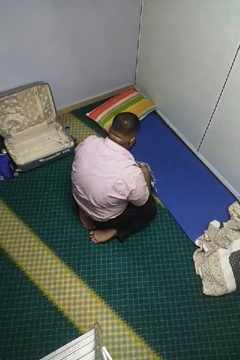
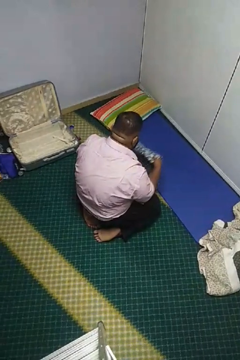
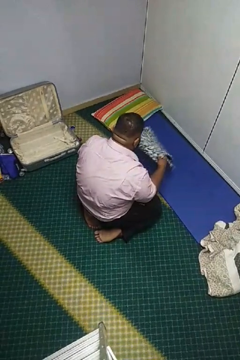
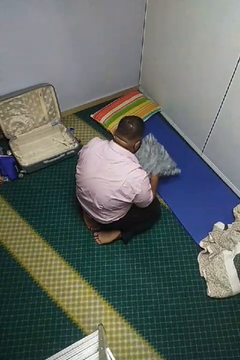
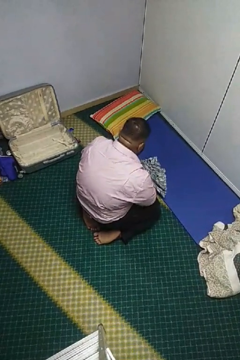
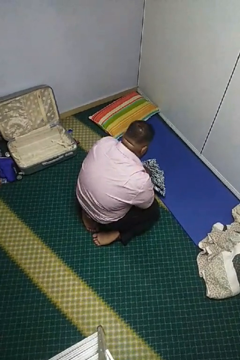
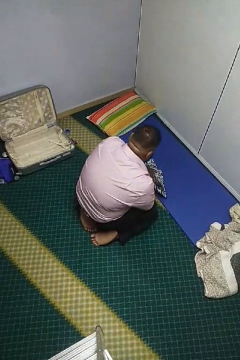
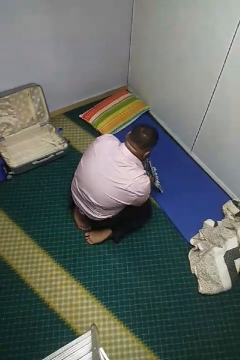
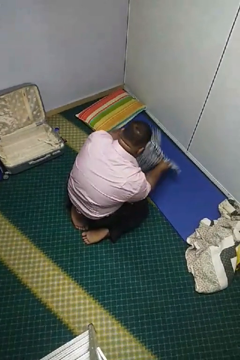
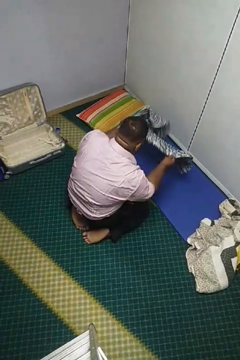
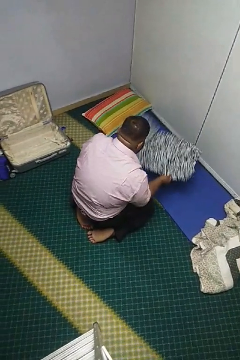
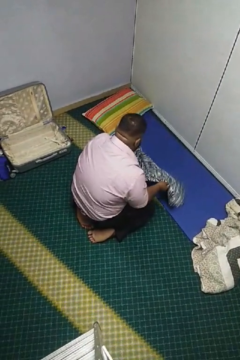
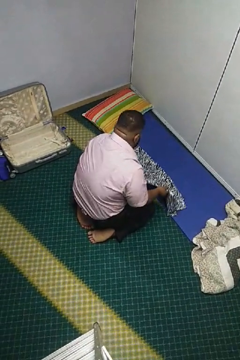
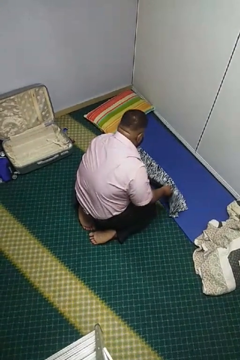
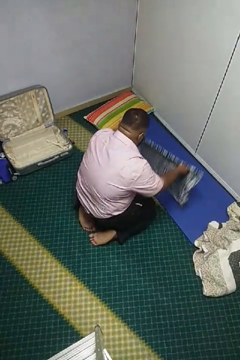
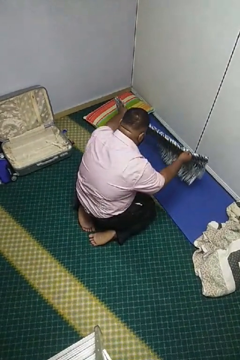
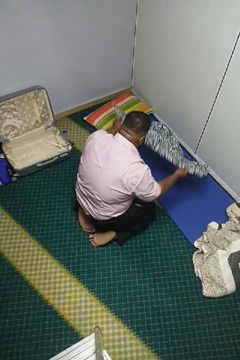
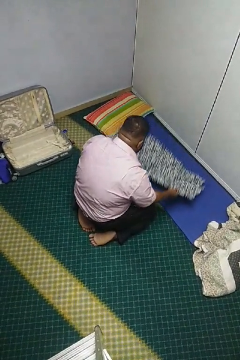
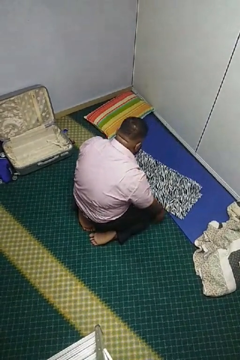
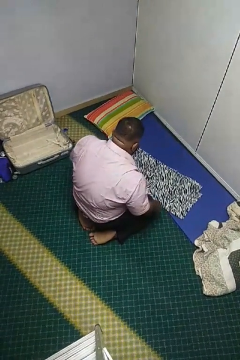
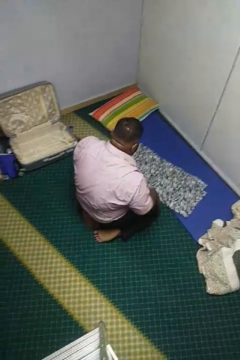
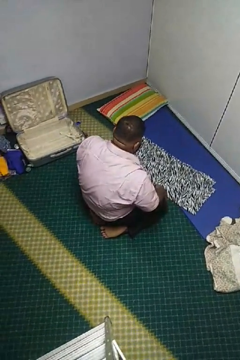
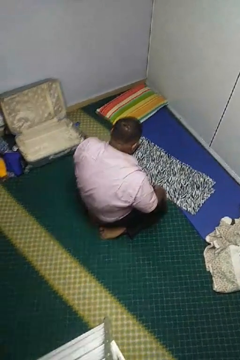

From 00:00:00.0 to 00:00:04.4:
person unfolds blanket

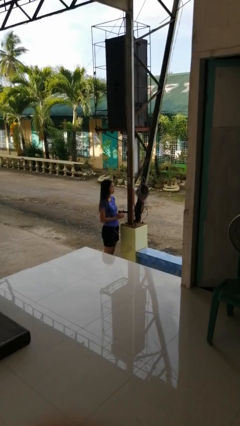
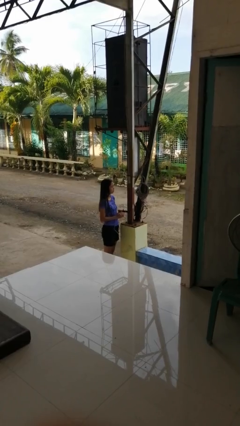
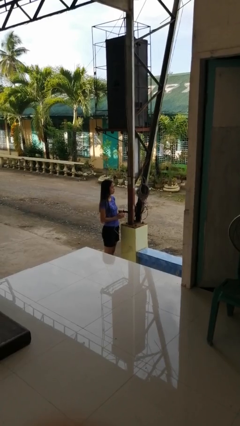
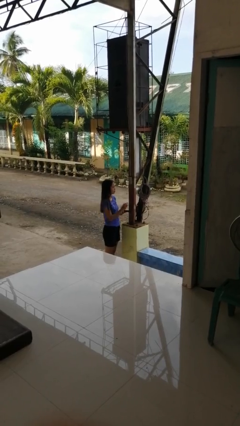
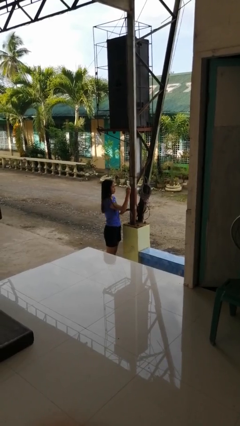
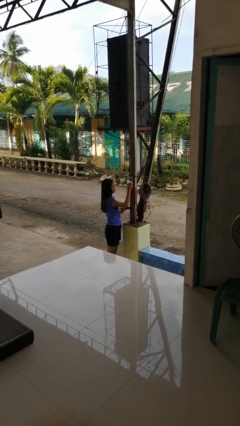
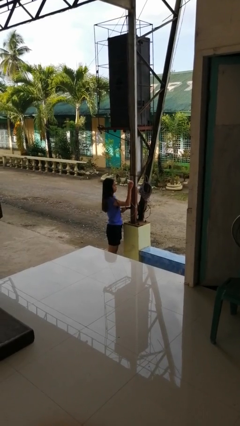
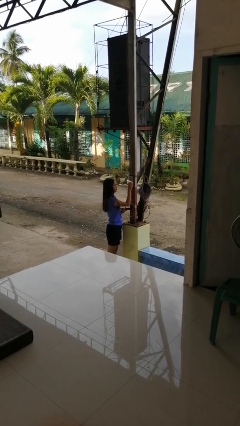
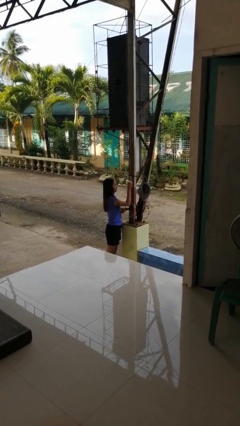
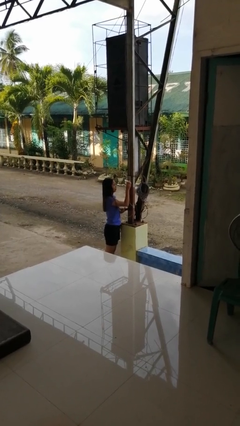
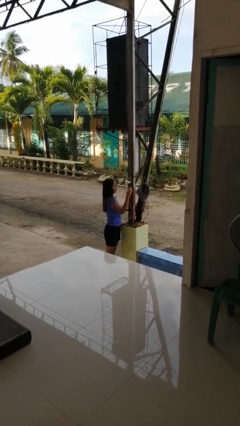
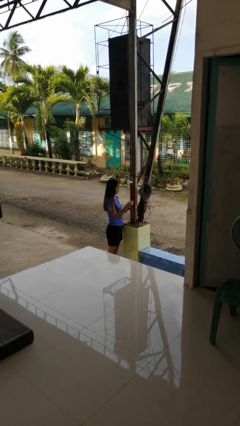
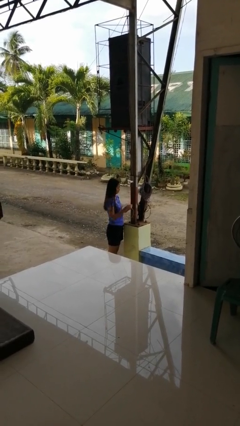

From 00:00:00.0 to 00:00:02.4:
person plugs into electrical socket

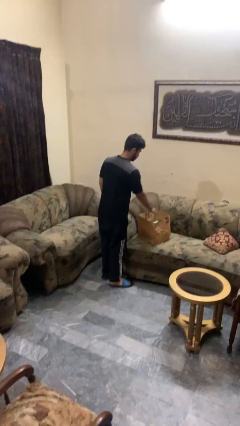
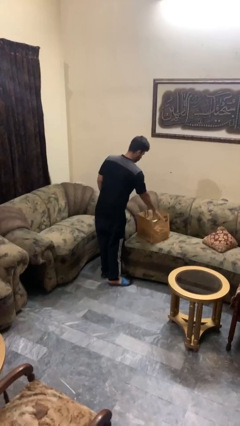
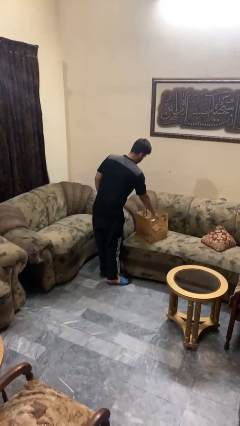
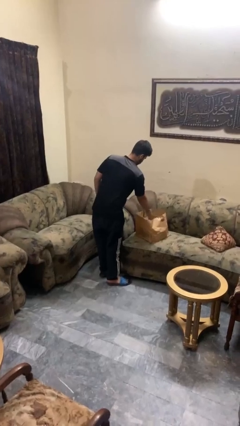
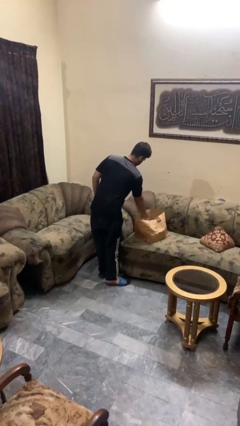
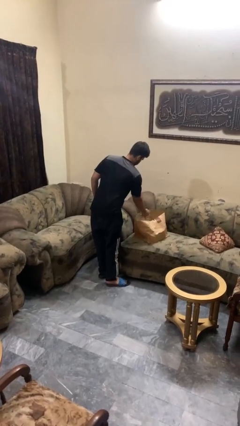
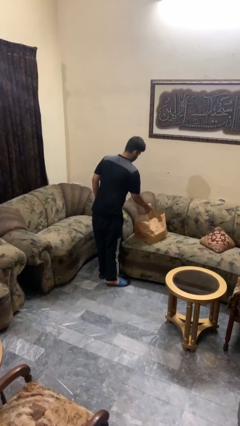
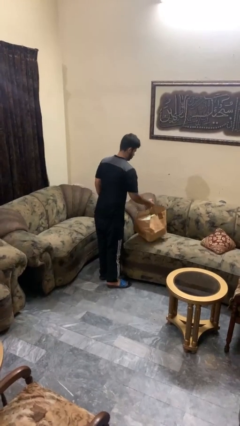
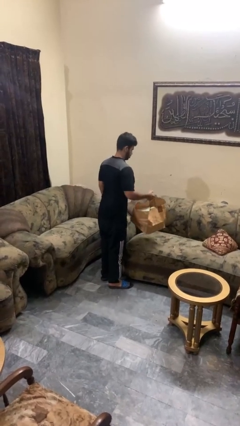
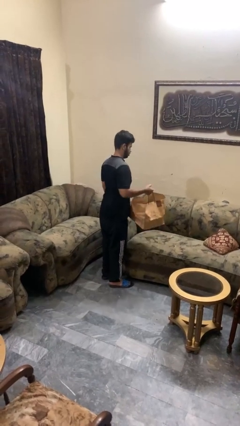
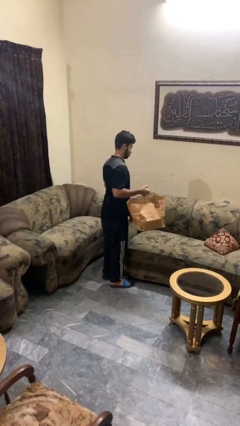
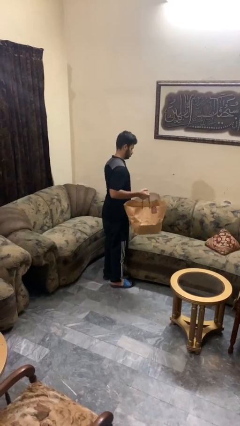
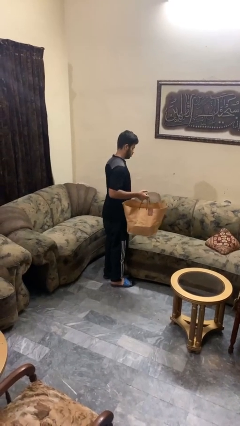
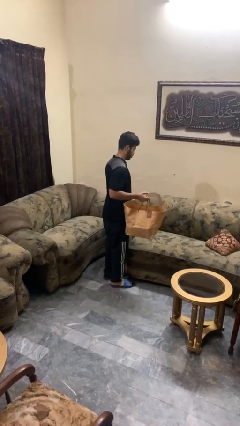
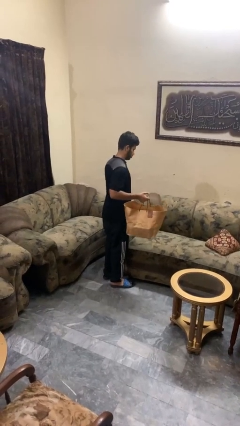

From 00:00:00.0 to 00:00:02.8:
person picks up object from couch

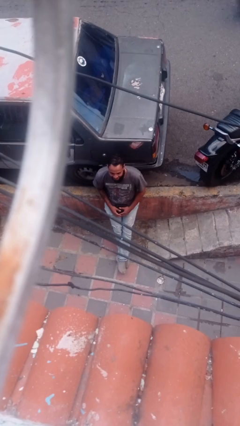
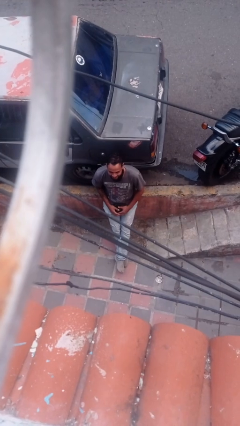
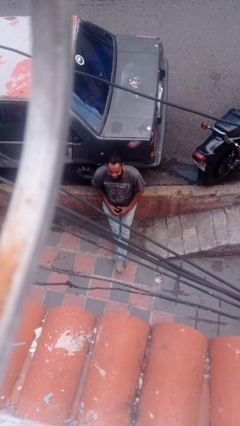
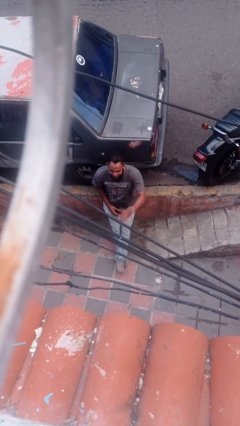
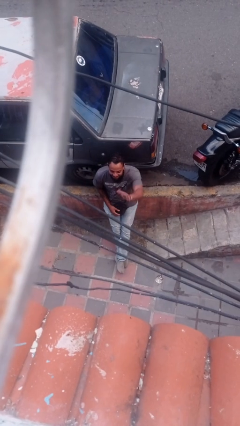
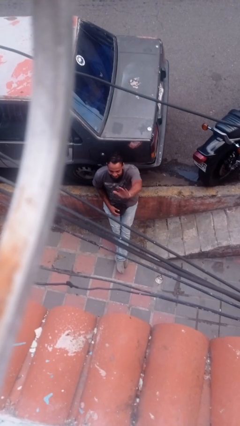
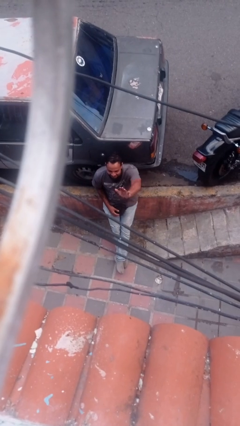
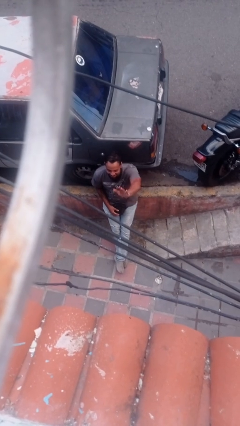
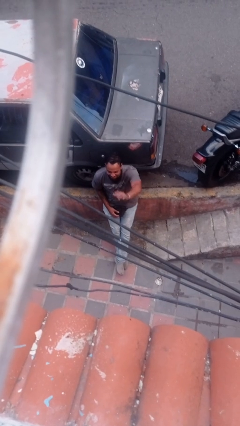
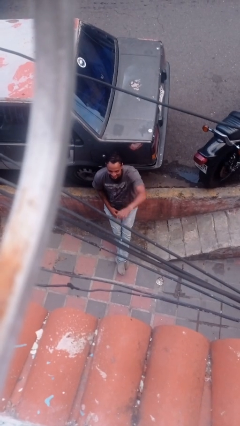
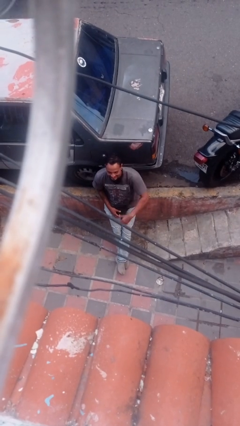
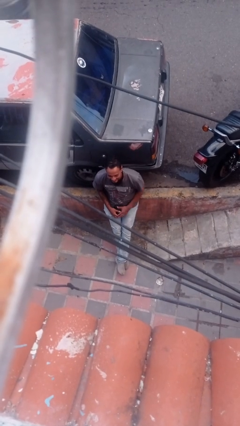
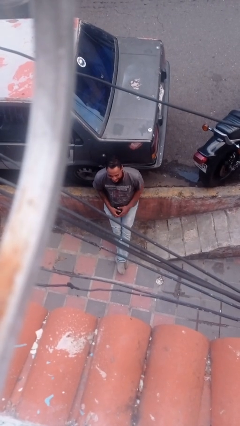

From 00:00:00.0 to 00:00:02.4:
person waves at person

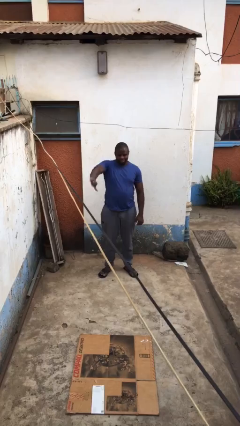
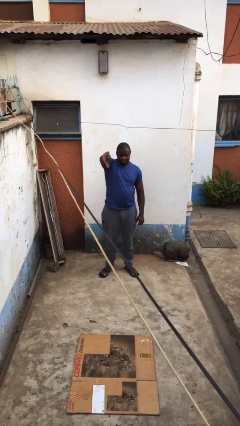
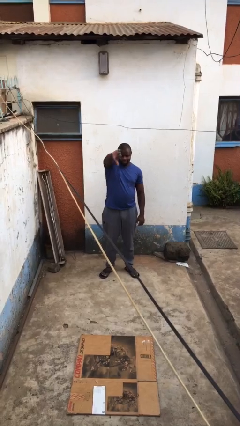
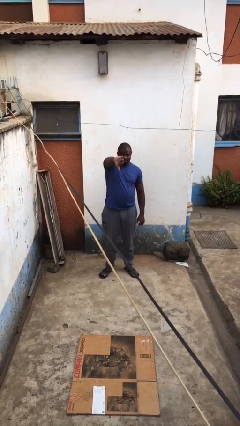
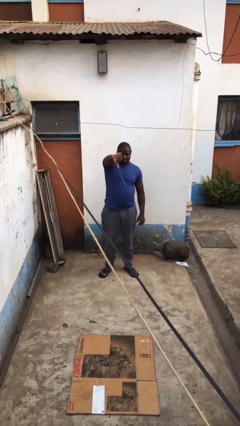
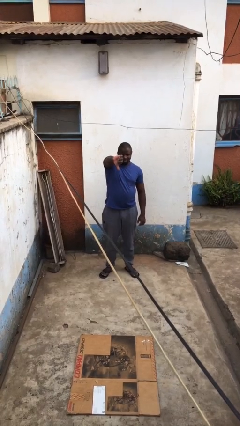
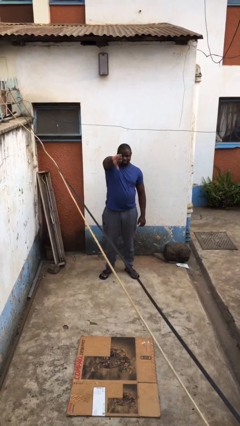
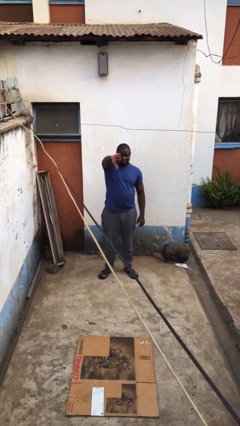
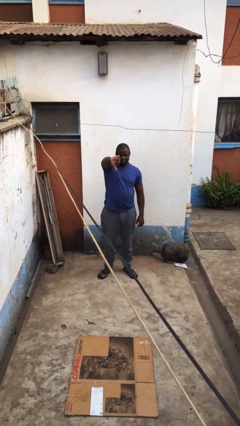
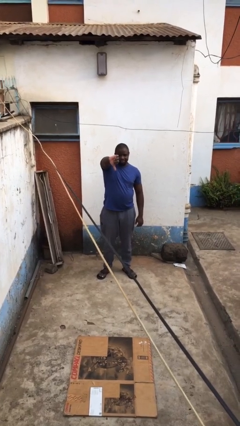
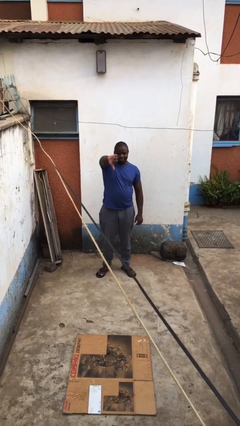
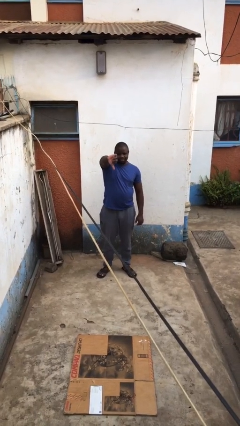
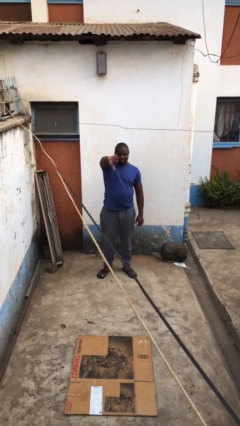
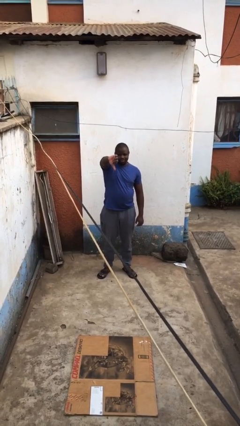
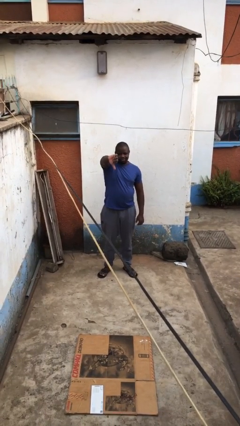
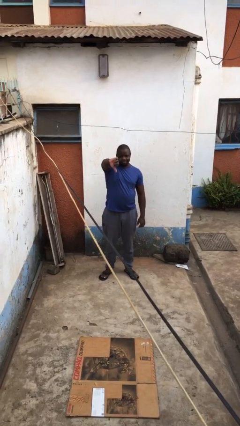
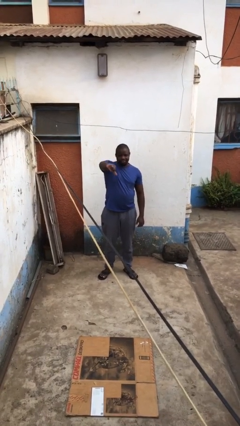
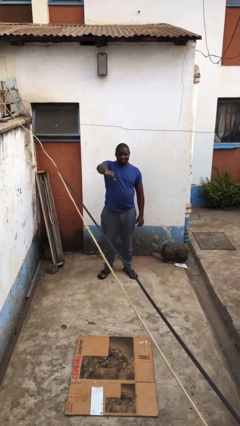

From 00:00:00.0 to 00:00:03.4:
person gestures thumbs down

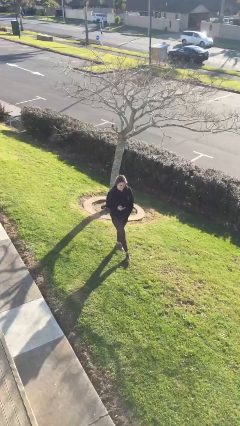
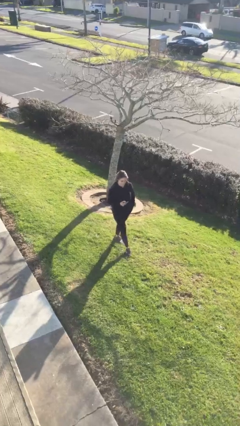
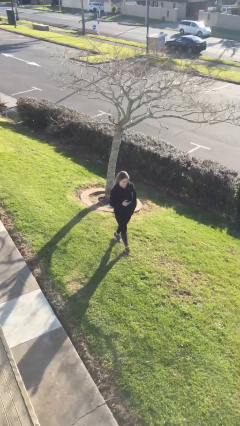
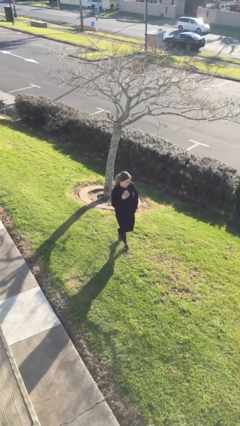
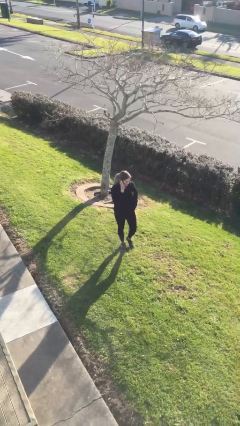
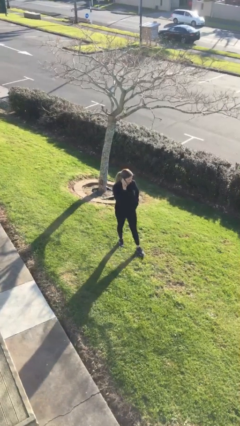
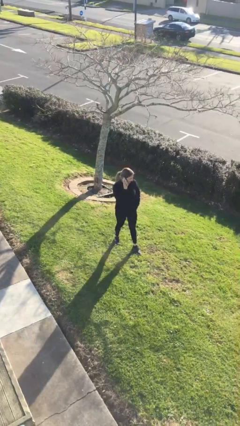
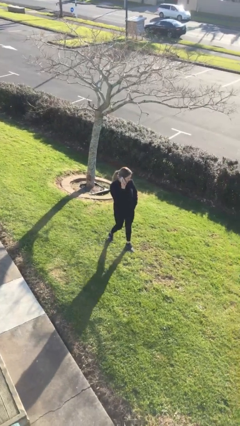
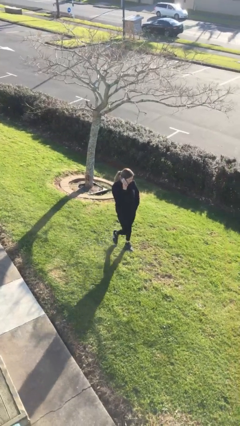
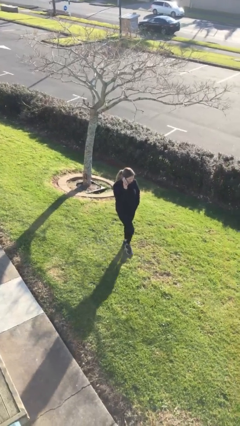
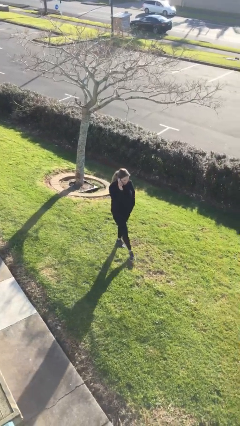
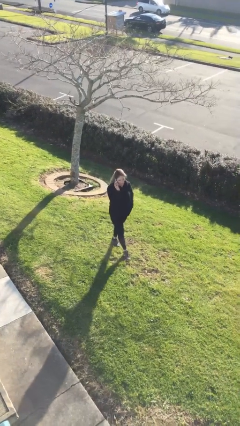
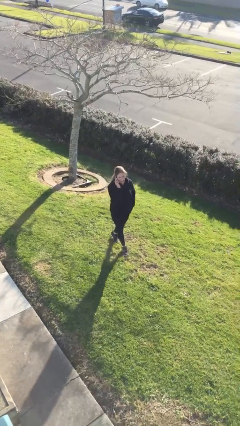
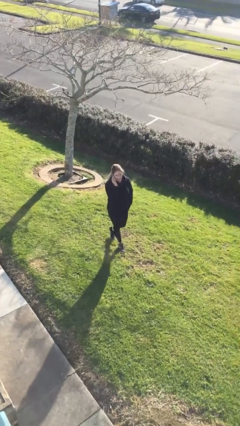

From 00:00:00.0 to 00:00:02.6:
person talks on phone

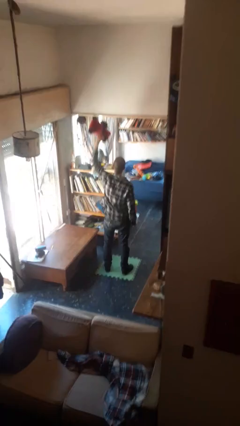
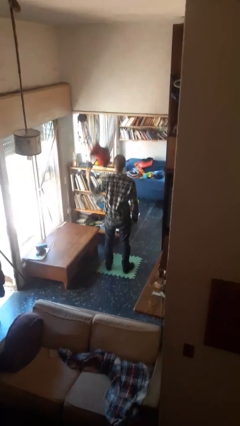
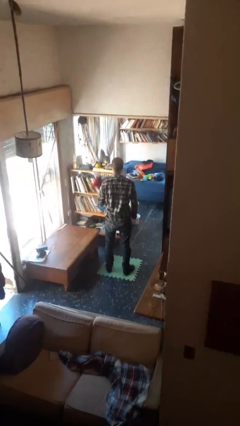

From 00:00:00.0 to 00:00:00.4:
person drops object

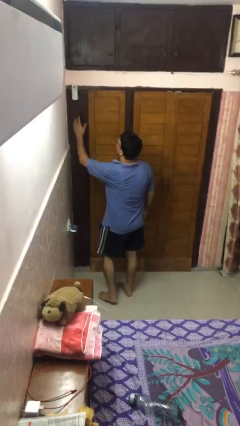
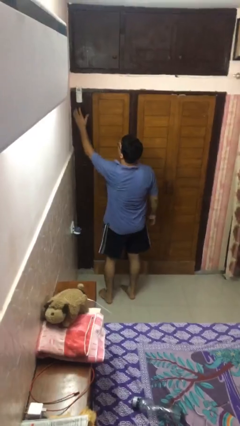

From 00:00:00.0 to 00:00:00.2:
person adjusts thermostat
